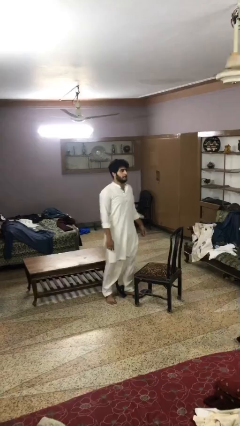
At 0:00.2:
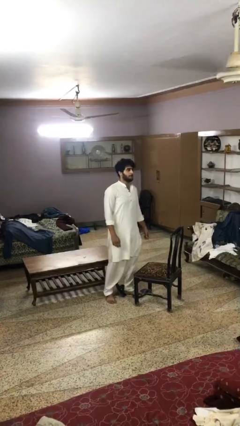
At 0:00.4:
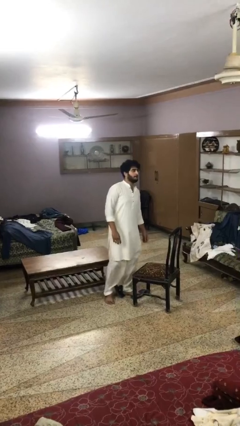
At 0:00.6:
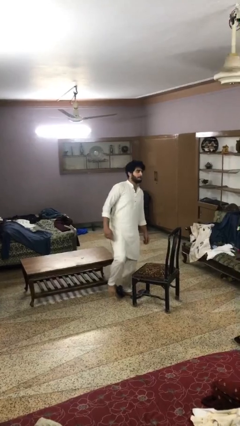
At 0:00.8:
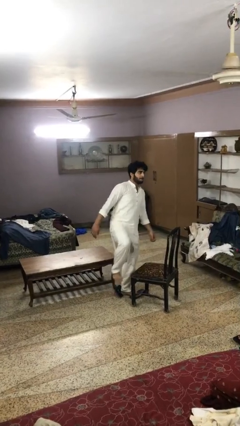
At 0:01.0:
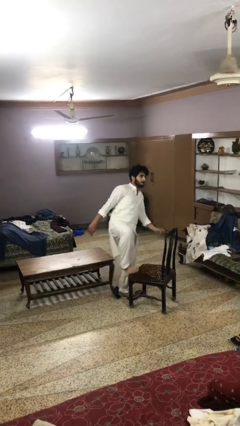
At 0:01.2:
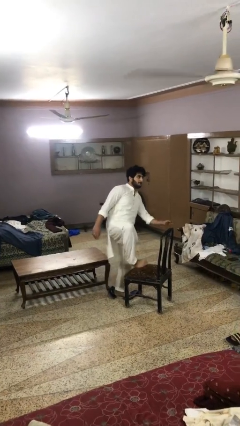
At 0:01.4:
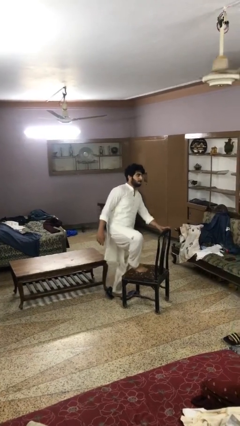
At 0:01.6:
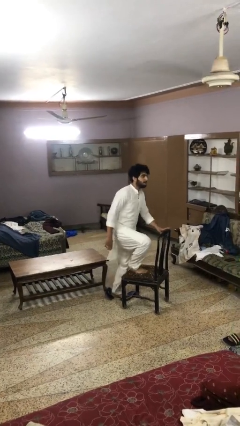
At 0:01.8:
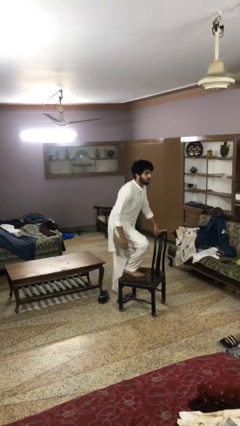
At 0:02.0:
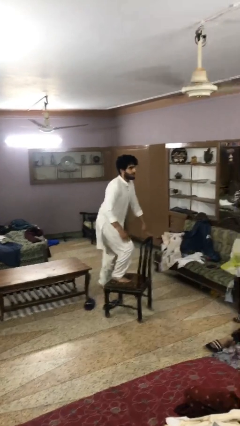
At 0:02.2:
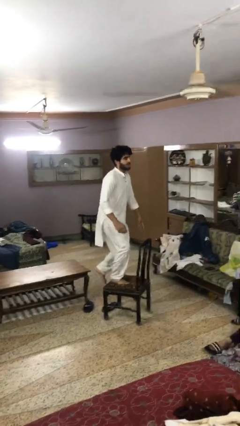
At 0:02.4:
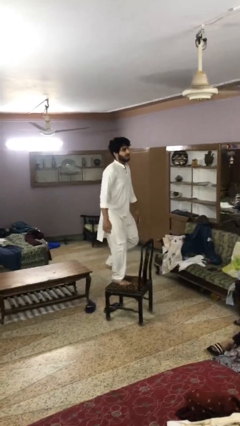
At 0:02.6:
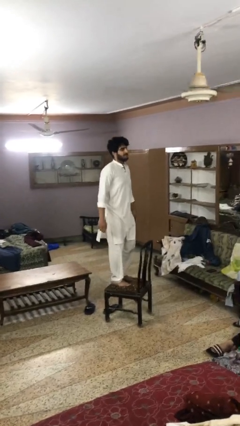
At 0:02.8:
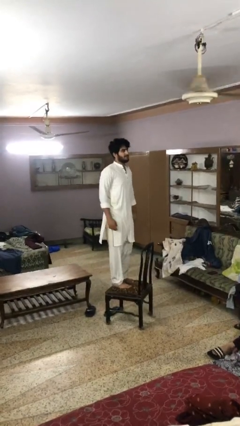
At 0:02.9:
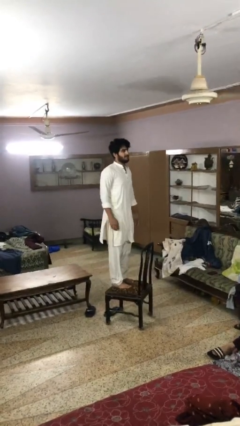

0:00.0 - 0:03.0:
person climbs on chair

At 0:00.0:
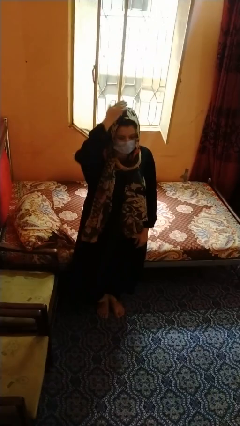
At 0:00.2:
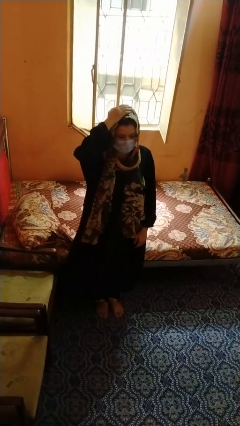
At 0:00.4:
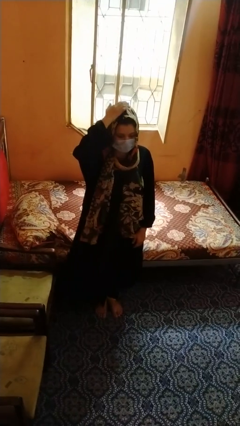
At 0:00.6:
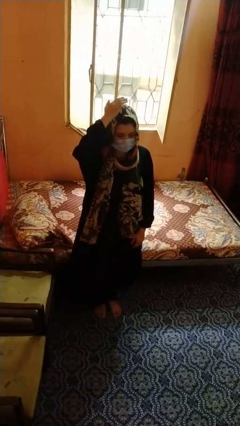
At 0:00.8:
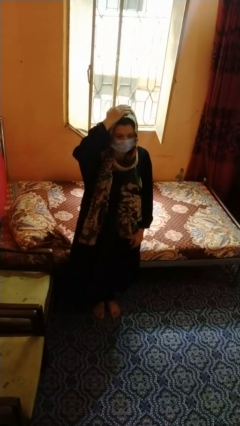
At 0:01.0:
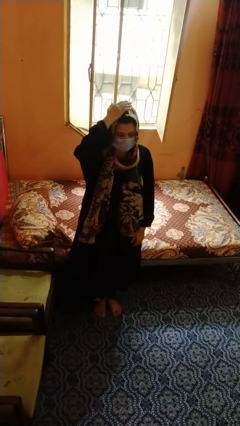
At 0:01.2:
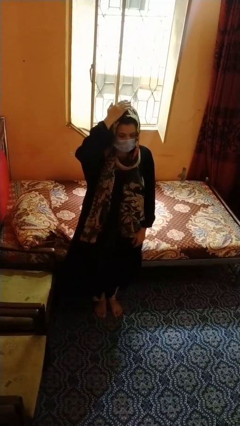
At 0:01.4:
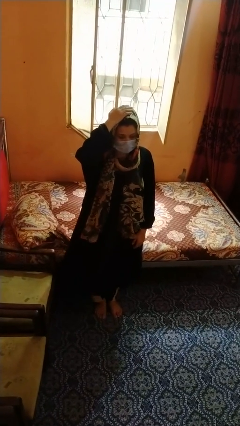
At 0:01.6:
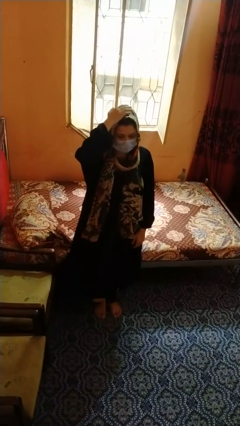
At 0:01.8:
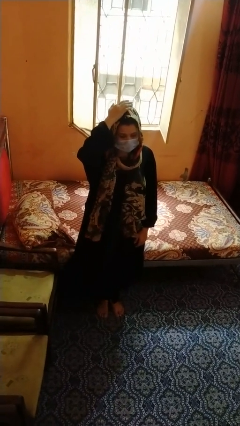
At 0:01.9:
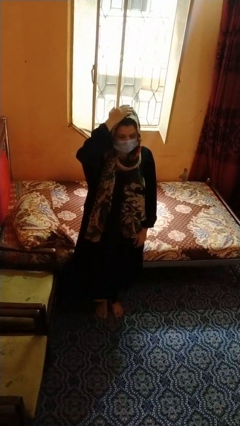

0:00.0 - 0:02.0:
person pats head

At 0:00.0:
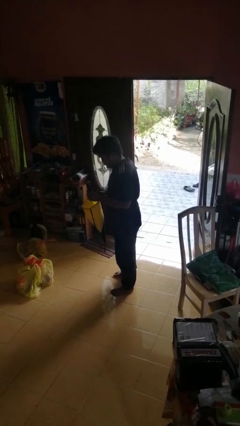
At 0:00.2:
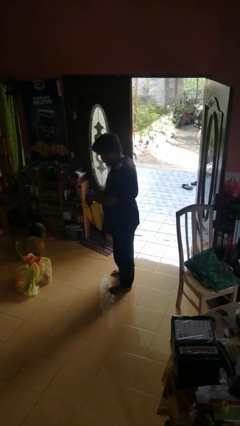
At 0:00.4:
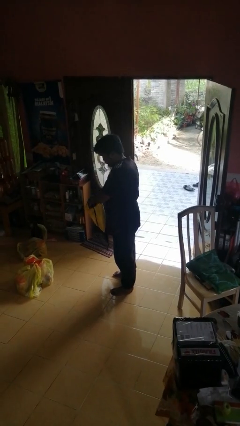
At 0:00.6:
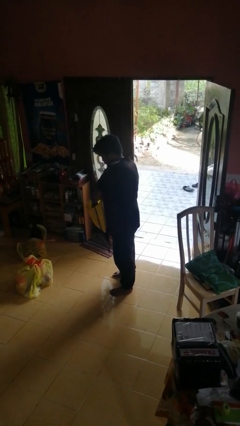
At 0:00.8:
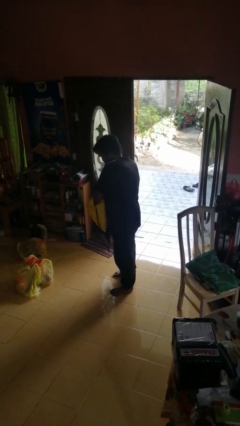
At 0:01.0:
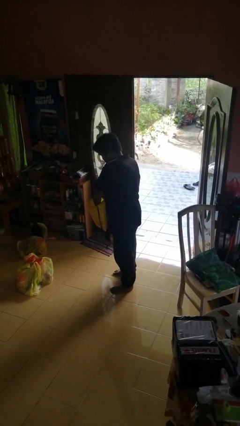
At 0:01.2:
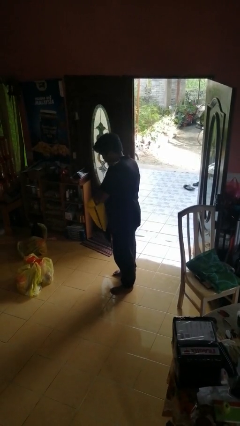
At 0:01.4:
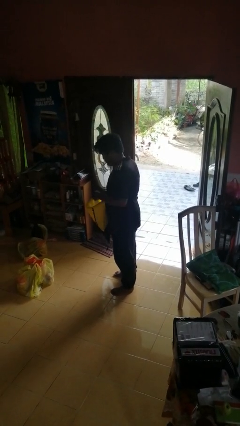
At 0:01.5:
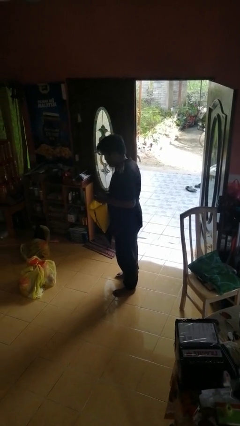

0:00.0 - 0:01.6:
person puts object into bag

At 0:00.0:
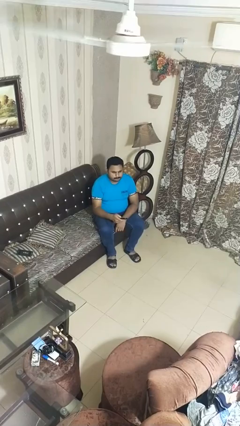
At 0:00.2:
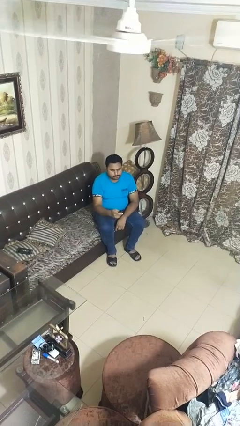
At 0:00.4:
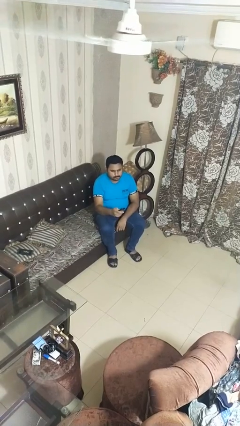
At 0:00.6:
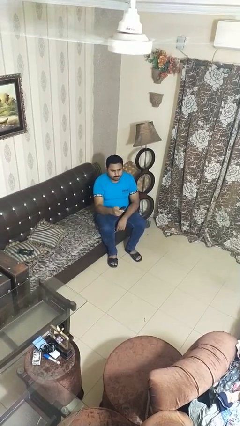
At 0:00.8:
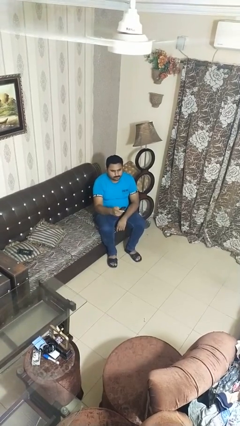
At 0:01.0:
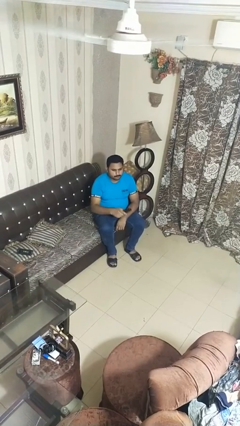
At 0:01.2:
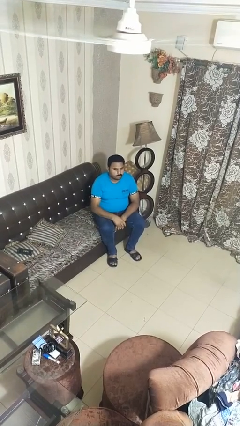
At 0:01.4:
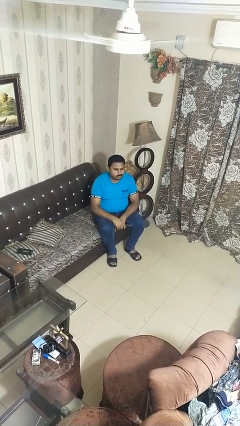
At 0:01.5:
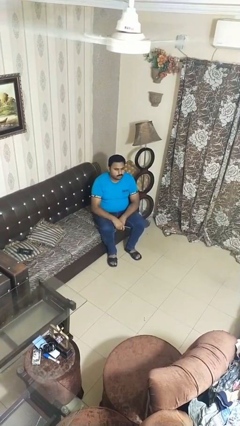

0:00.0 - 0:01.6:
person uses television remote

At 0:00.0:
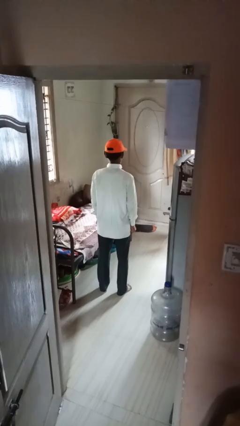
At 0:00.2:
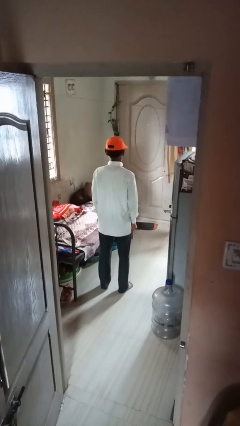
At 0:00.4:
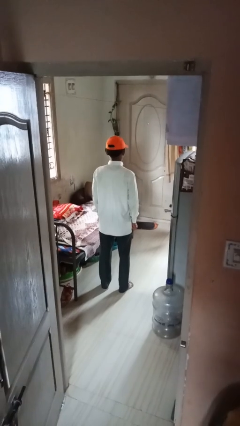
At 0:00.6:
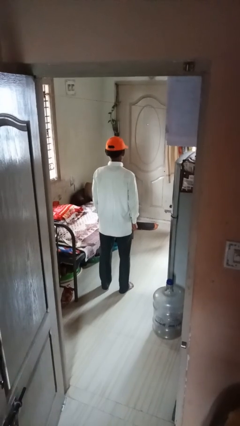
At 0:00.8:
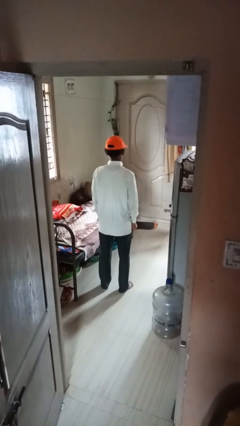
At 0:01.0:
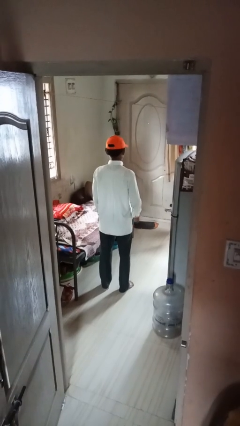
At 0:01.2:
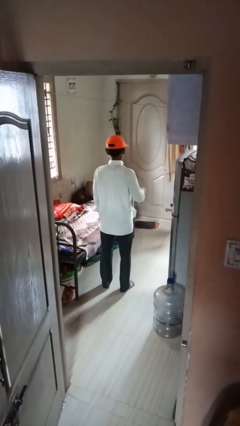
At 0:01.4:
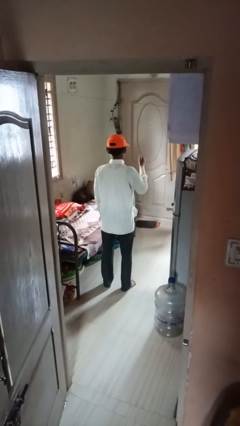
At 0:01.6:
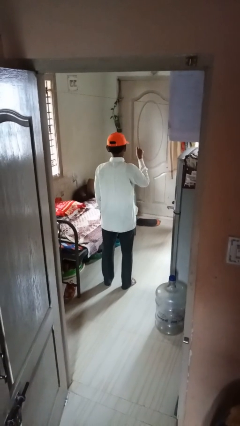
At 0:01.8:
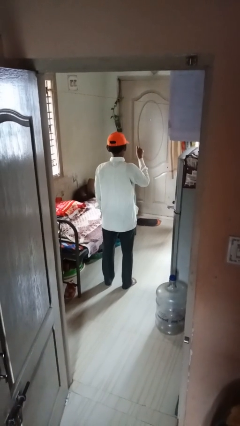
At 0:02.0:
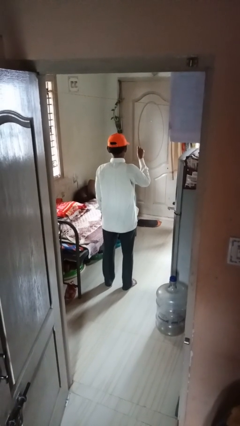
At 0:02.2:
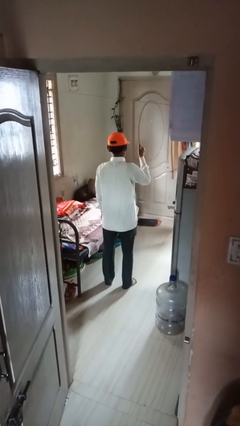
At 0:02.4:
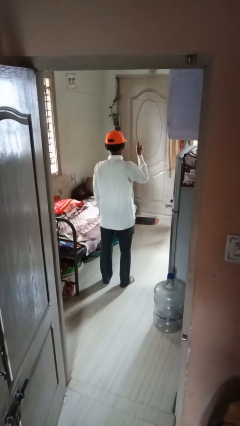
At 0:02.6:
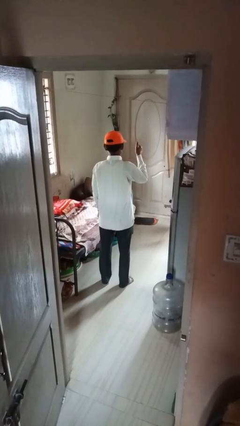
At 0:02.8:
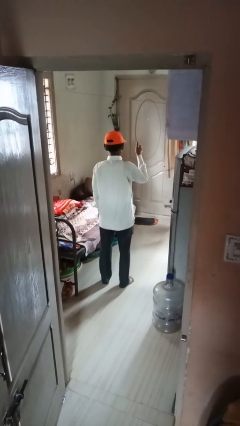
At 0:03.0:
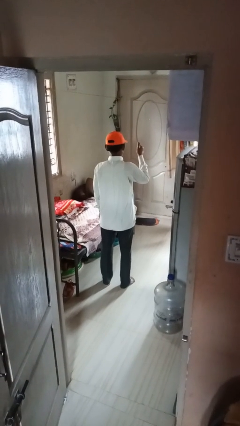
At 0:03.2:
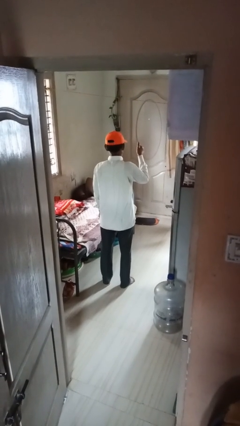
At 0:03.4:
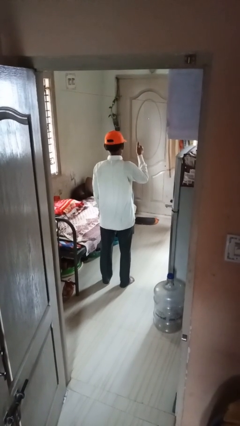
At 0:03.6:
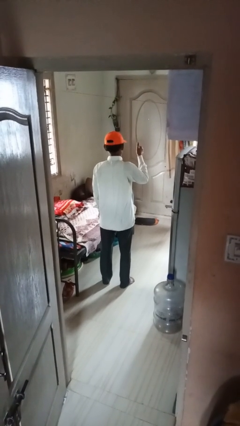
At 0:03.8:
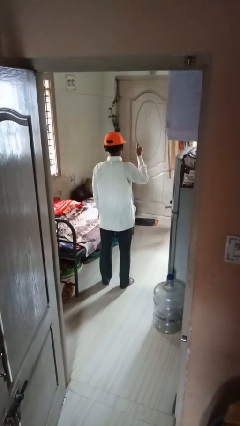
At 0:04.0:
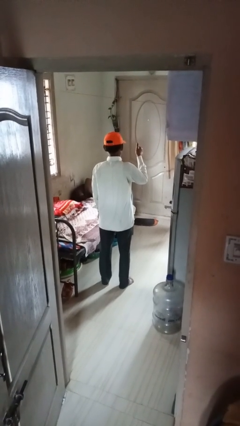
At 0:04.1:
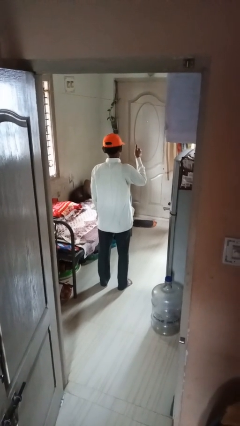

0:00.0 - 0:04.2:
person gestures thumbs up

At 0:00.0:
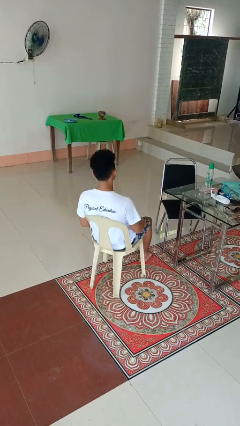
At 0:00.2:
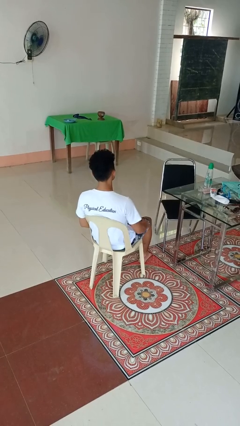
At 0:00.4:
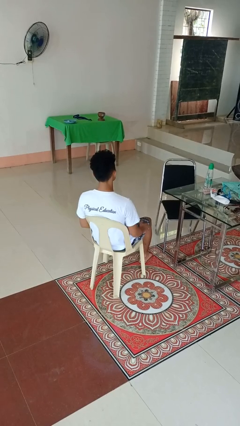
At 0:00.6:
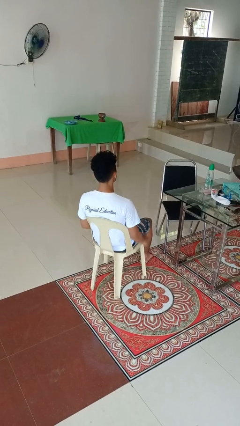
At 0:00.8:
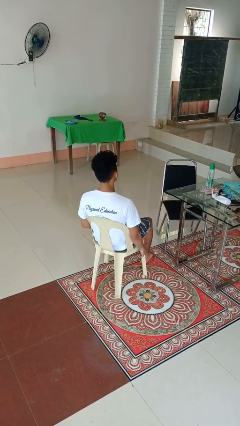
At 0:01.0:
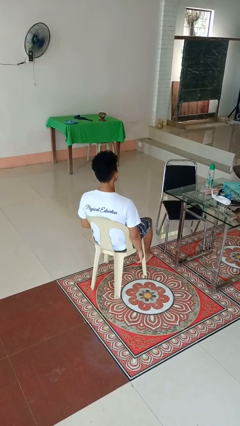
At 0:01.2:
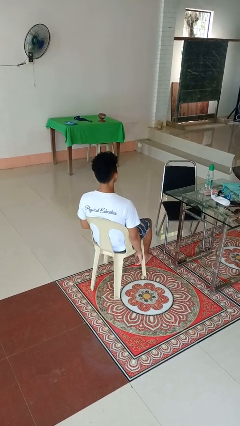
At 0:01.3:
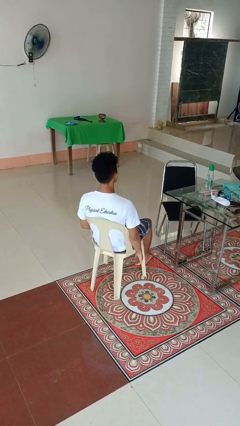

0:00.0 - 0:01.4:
person slaps hands on thighs

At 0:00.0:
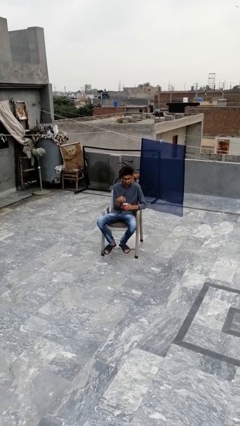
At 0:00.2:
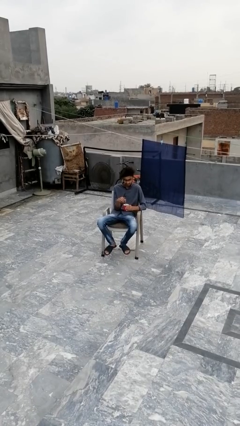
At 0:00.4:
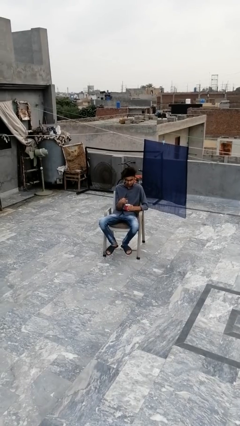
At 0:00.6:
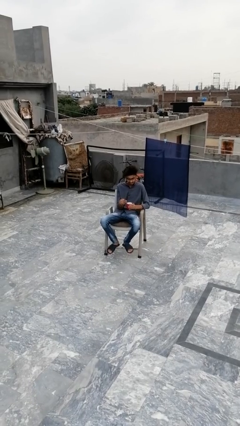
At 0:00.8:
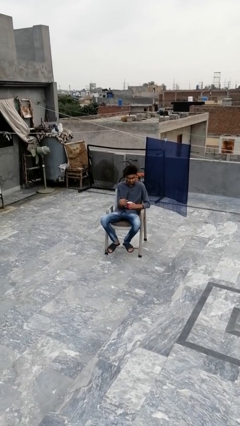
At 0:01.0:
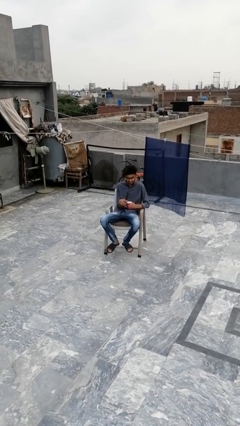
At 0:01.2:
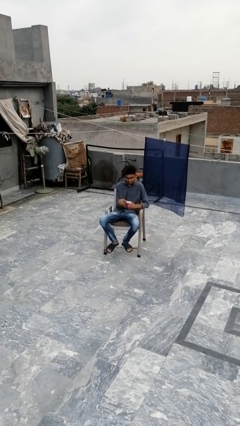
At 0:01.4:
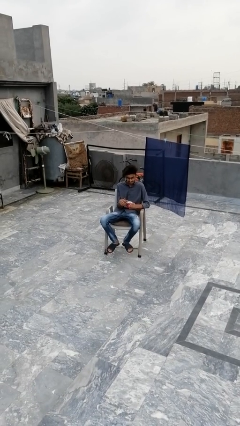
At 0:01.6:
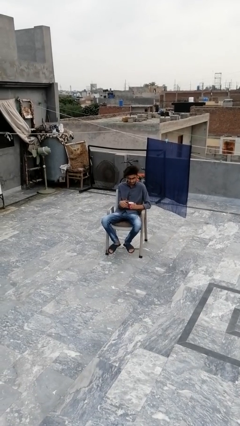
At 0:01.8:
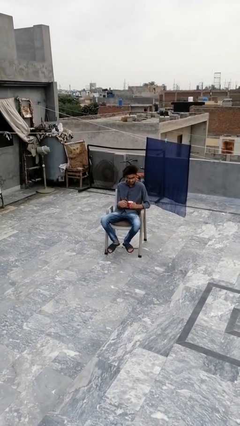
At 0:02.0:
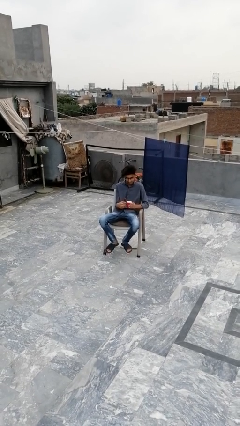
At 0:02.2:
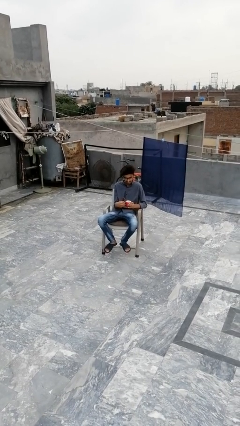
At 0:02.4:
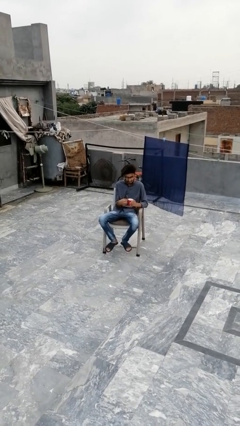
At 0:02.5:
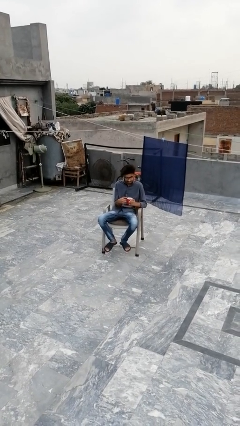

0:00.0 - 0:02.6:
person stirs mug

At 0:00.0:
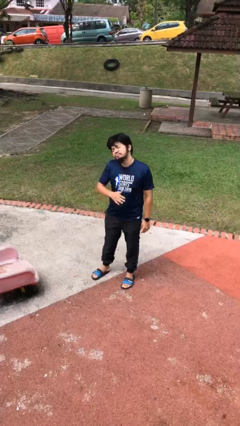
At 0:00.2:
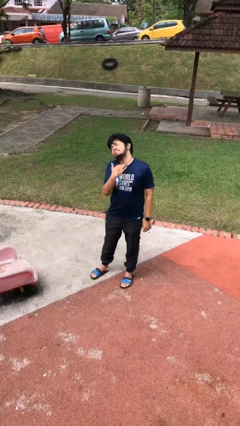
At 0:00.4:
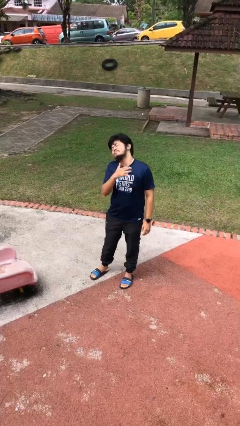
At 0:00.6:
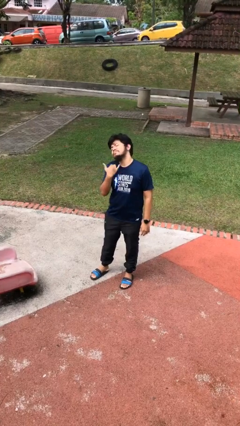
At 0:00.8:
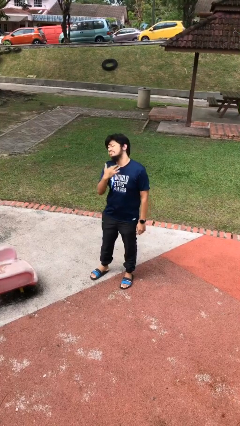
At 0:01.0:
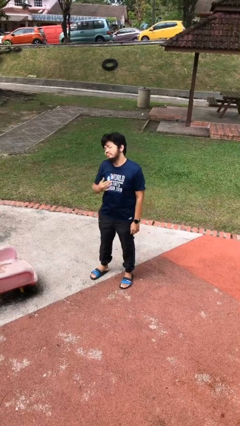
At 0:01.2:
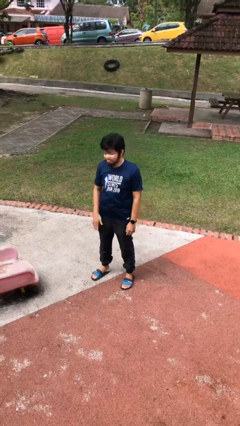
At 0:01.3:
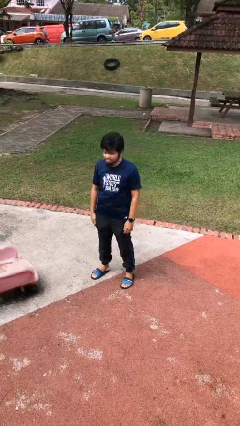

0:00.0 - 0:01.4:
person gestures cut
